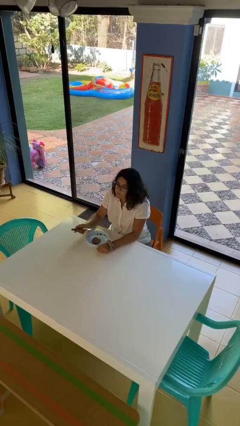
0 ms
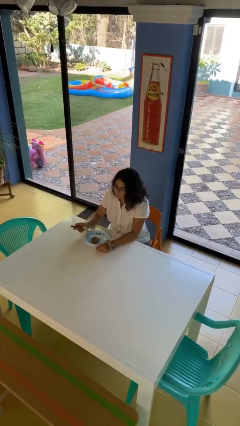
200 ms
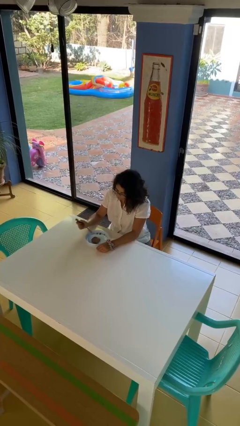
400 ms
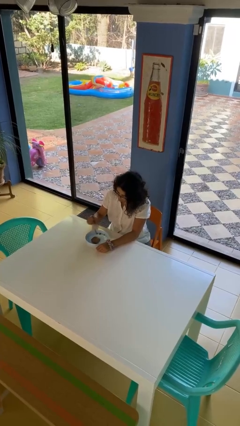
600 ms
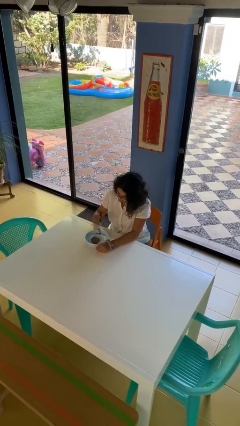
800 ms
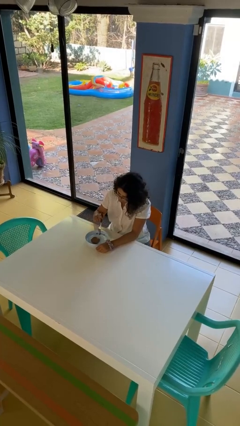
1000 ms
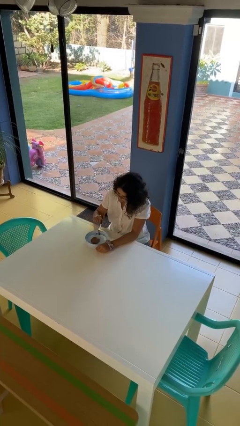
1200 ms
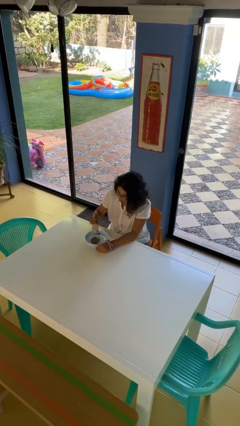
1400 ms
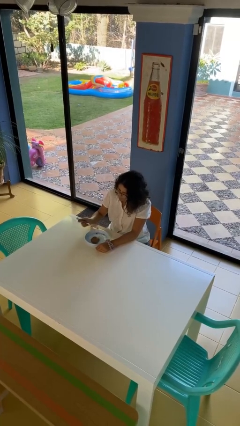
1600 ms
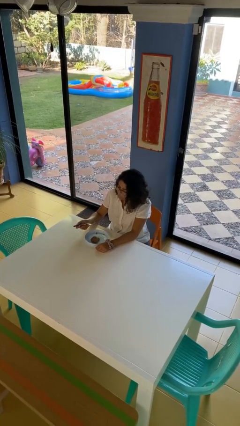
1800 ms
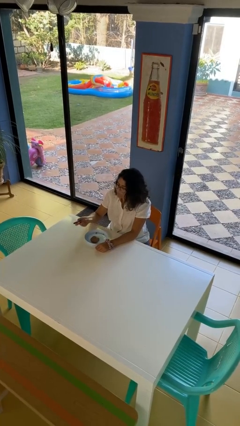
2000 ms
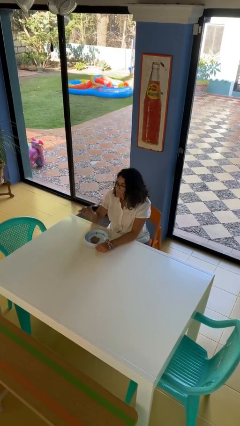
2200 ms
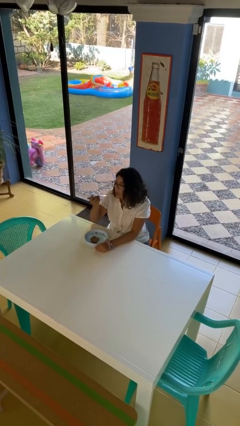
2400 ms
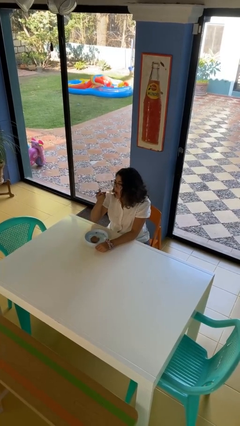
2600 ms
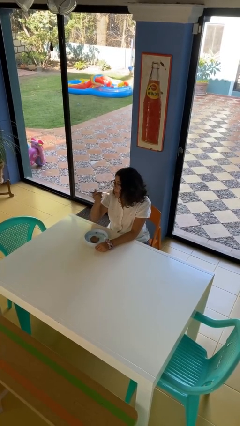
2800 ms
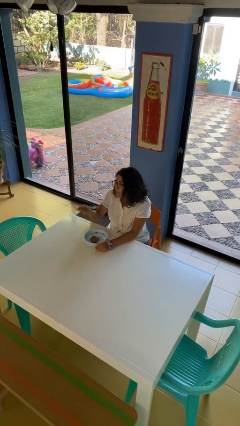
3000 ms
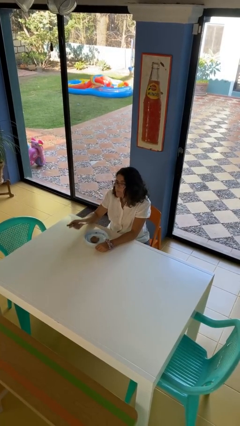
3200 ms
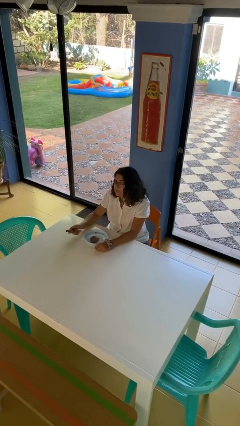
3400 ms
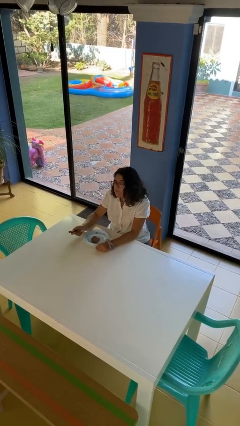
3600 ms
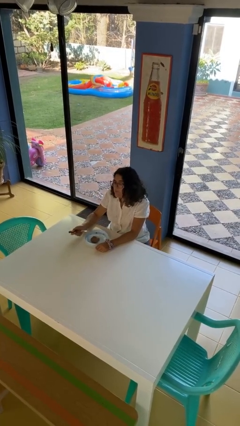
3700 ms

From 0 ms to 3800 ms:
person eats with utensil

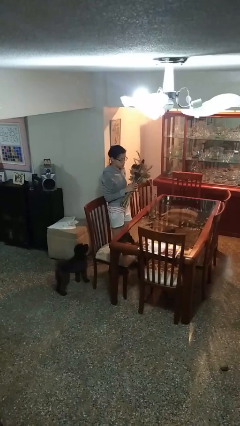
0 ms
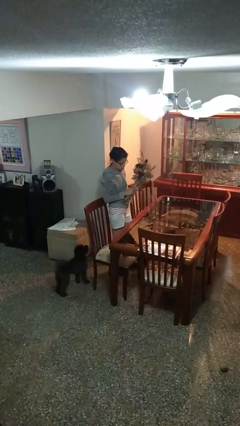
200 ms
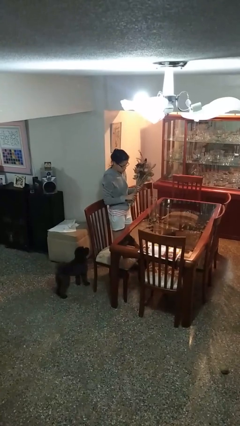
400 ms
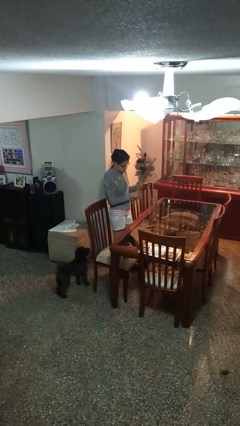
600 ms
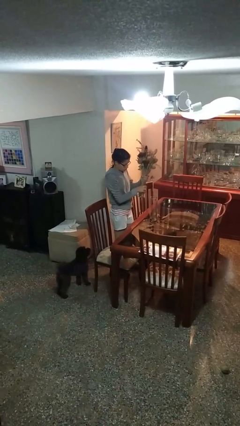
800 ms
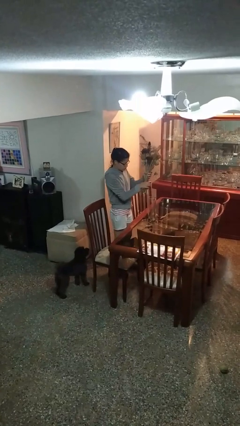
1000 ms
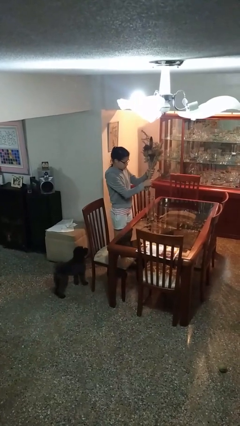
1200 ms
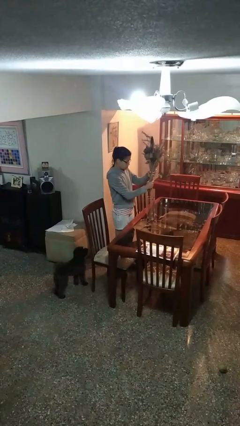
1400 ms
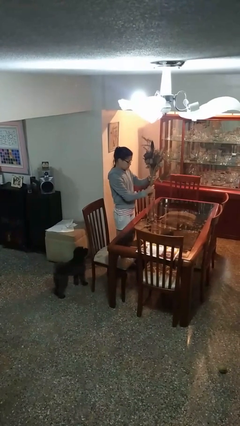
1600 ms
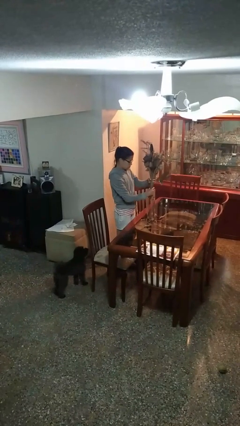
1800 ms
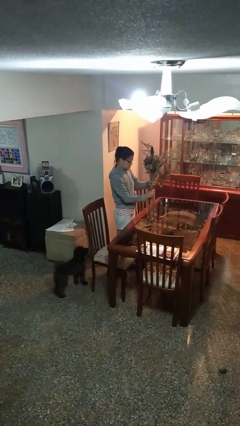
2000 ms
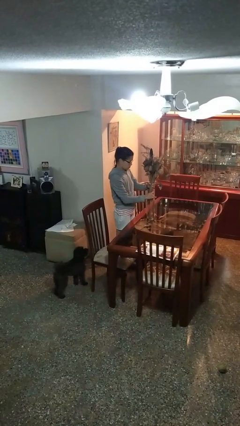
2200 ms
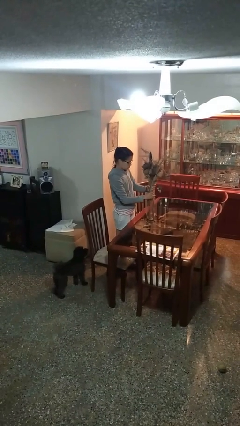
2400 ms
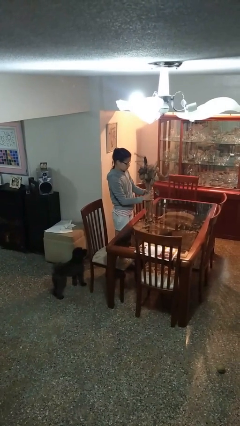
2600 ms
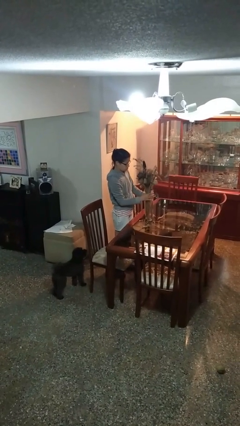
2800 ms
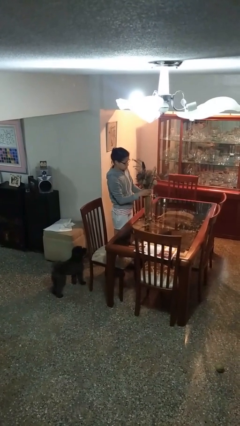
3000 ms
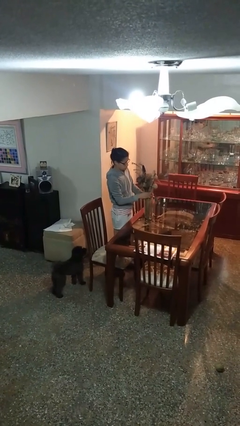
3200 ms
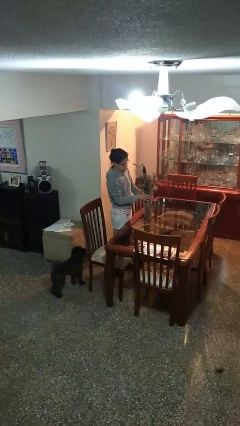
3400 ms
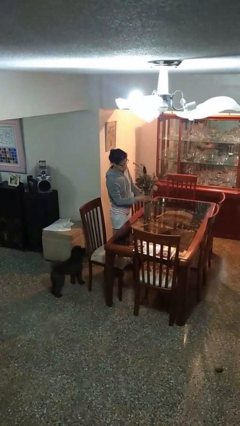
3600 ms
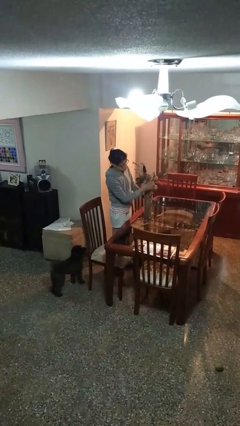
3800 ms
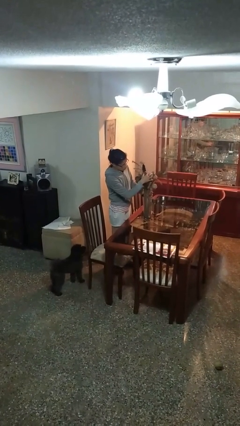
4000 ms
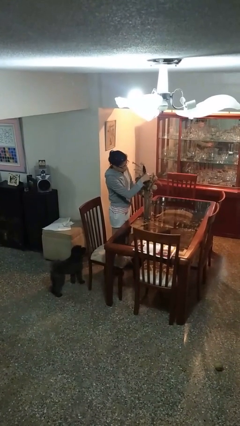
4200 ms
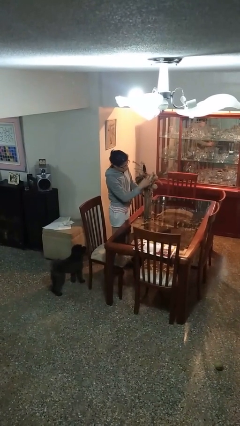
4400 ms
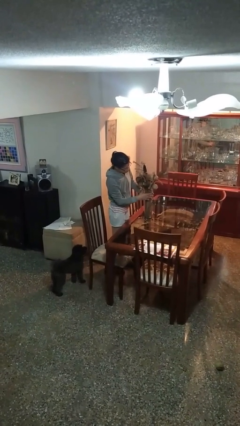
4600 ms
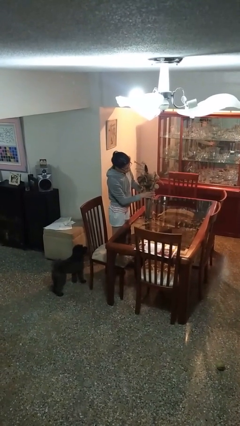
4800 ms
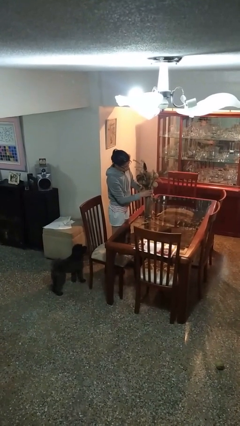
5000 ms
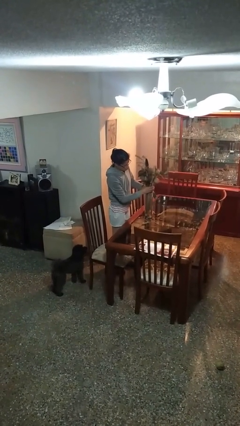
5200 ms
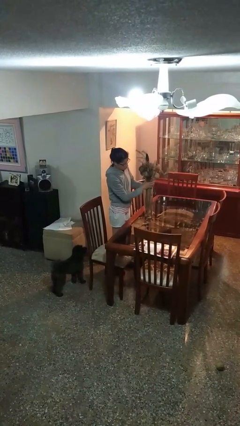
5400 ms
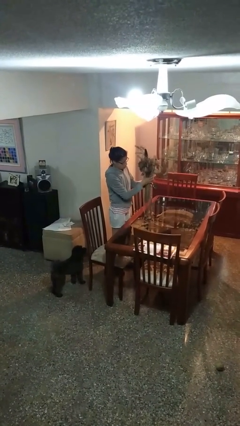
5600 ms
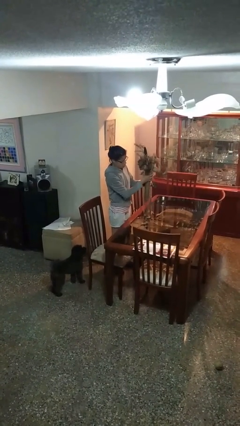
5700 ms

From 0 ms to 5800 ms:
person arranges flowers in vase

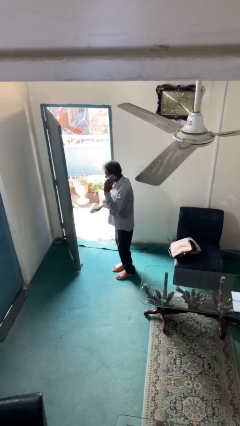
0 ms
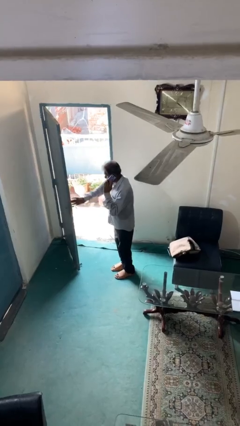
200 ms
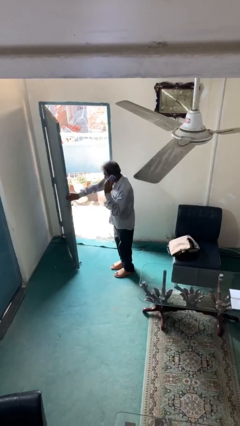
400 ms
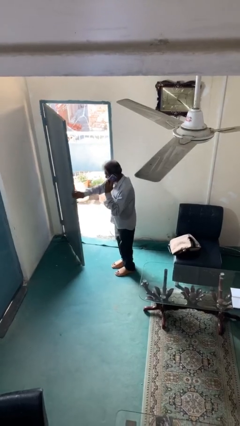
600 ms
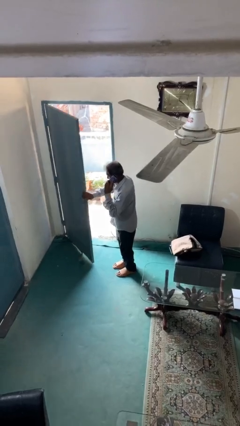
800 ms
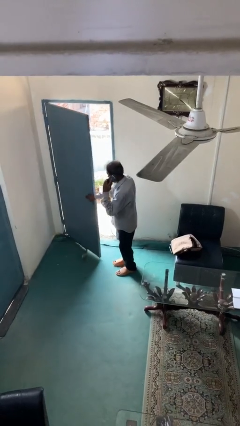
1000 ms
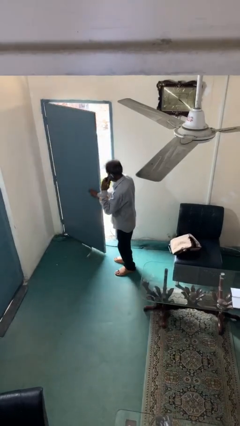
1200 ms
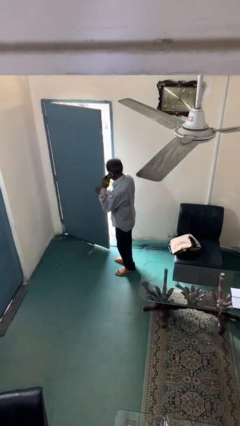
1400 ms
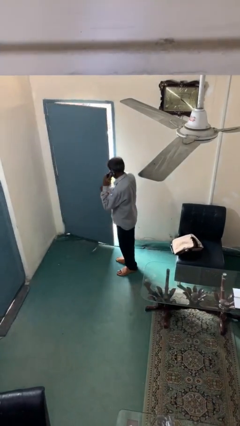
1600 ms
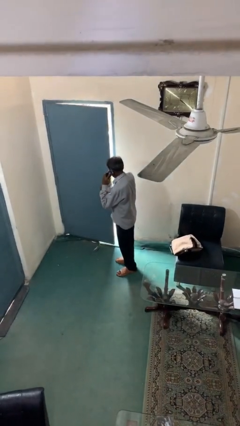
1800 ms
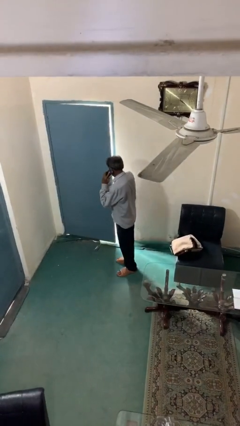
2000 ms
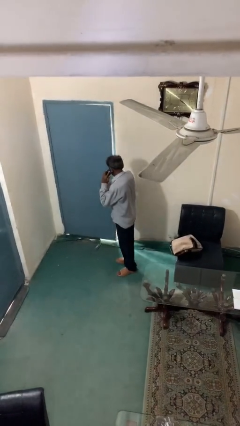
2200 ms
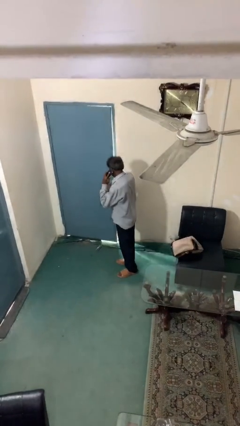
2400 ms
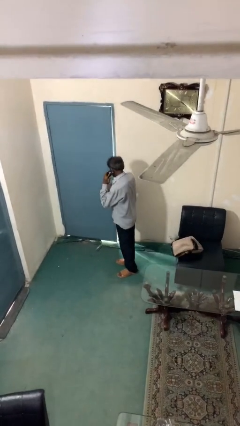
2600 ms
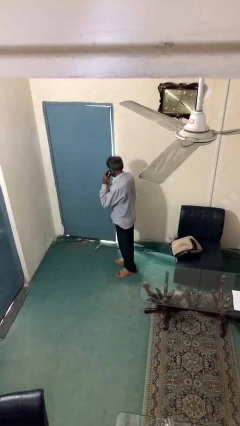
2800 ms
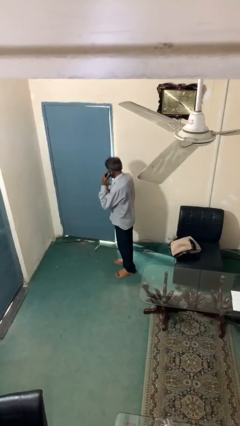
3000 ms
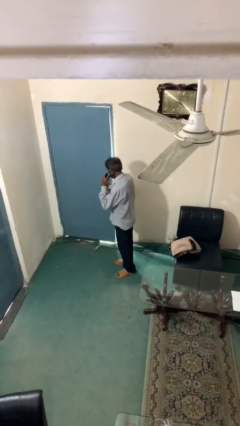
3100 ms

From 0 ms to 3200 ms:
person closes facility door

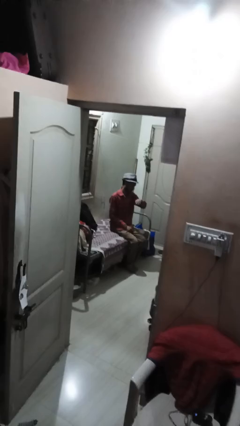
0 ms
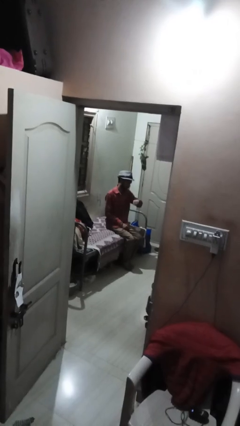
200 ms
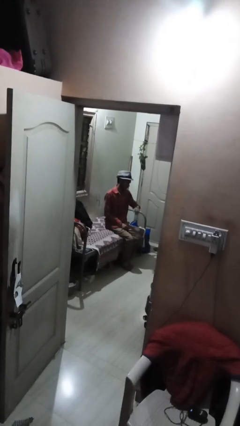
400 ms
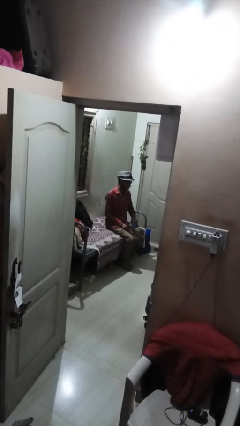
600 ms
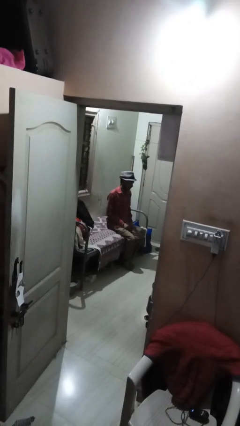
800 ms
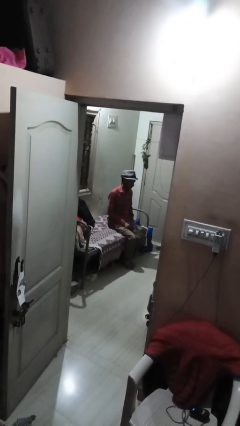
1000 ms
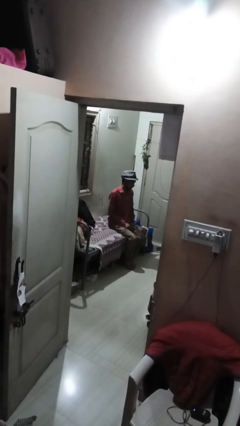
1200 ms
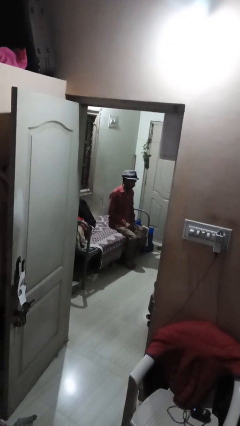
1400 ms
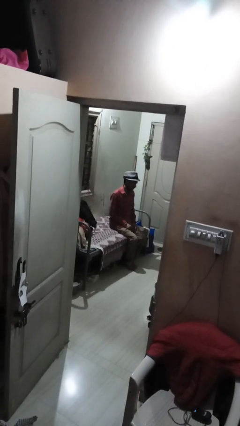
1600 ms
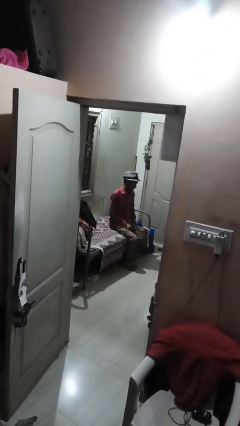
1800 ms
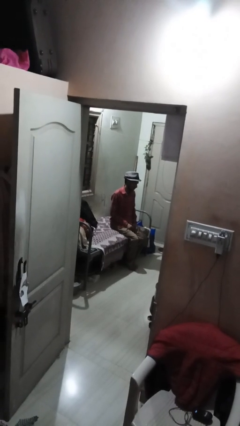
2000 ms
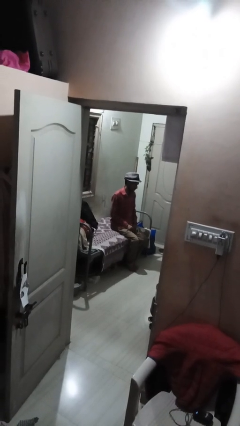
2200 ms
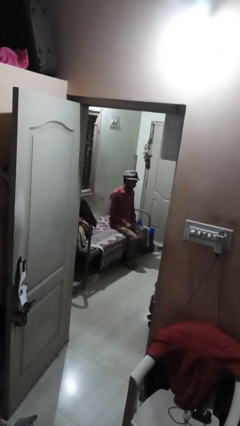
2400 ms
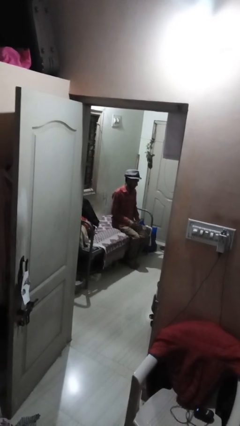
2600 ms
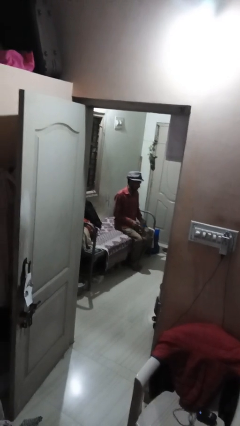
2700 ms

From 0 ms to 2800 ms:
person looks at wristwatch

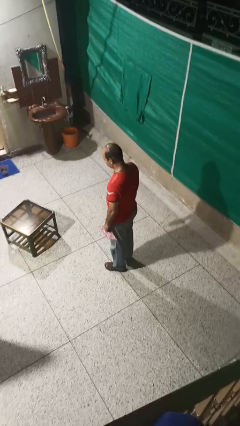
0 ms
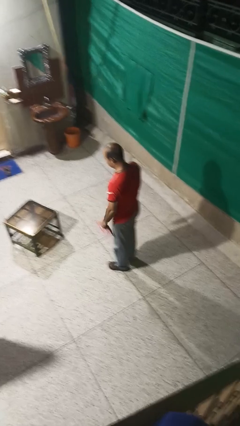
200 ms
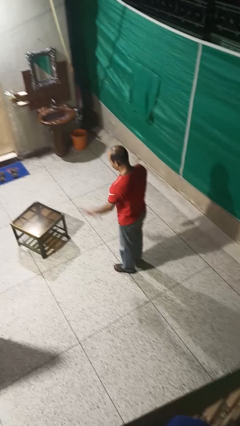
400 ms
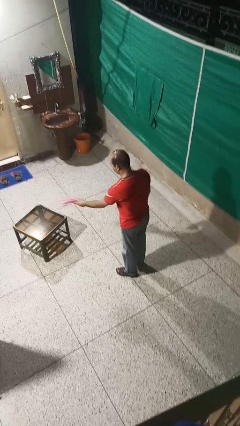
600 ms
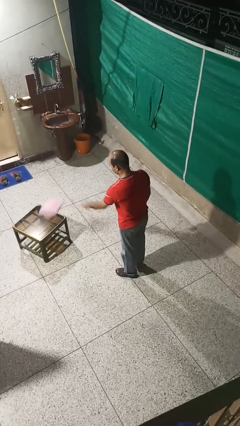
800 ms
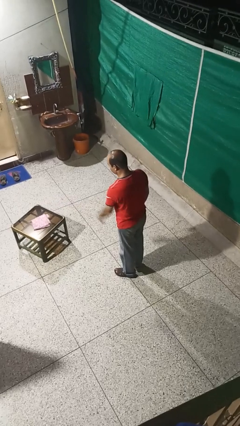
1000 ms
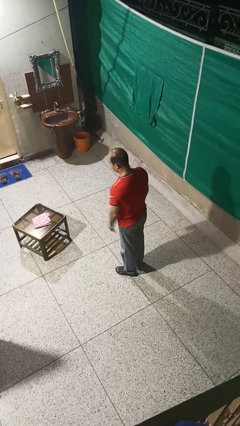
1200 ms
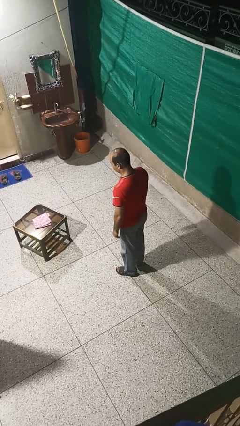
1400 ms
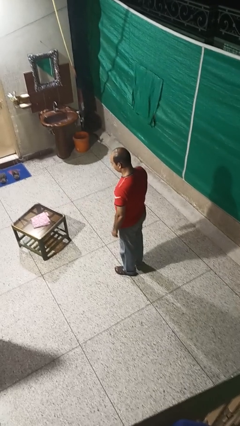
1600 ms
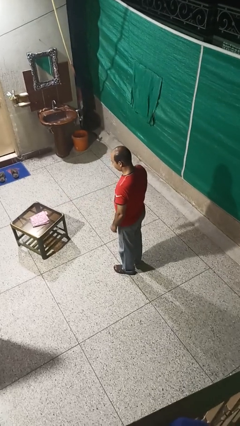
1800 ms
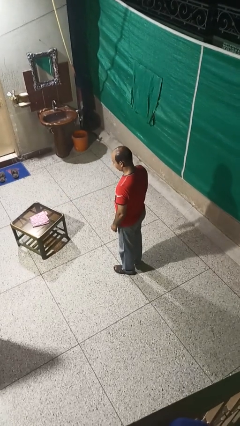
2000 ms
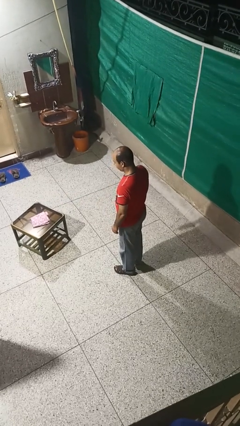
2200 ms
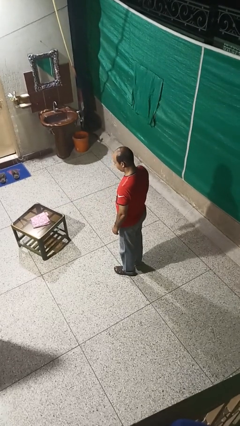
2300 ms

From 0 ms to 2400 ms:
person throws object on table
